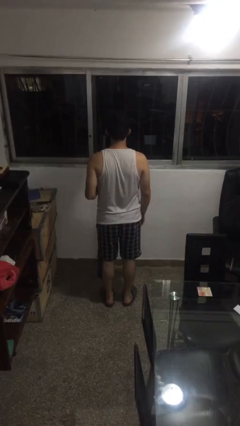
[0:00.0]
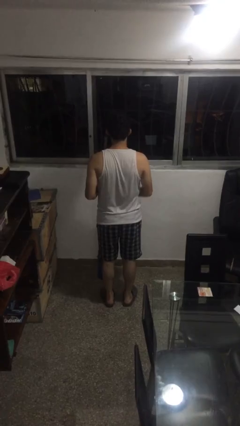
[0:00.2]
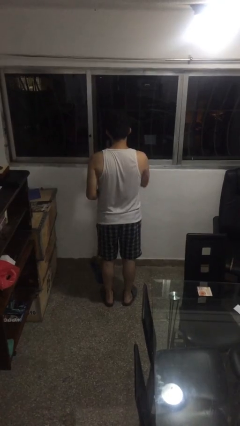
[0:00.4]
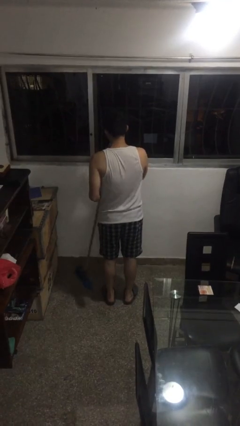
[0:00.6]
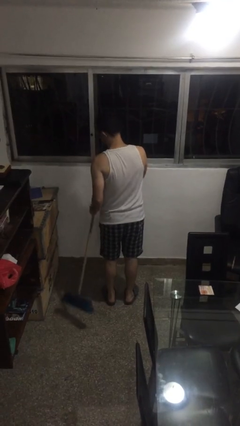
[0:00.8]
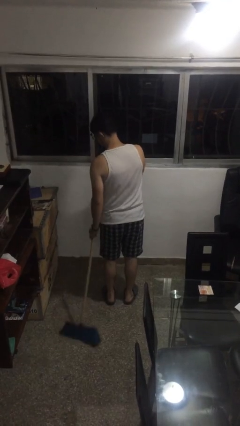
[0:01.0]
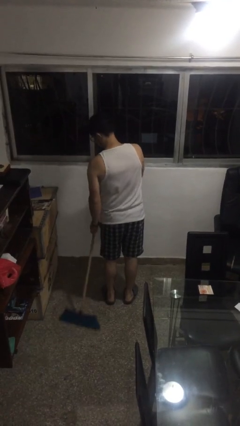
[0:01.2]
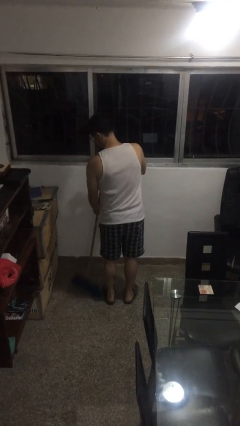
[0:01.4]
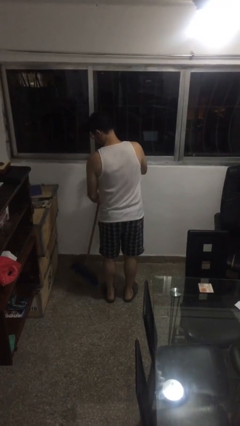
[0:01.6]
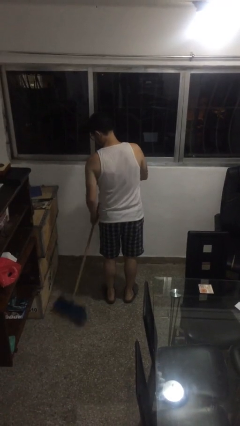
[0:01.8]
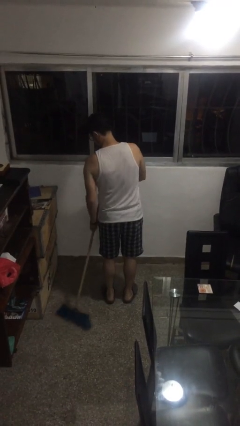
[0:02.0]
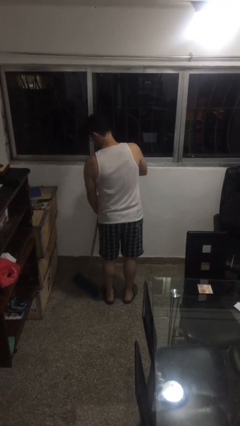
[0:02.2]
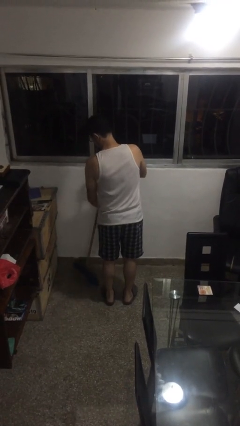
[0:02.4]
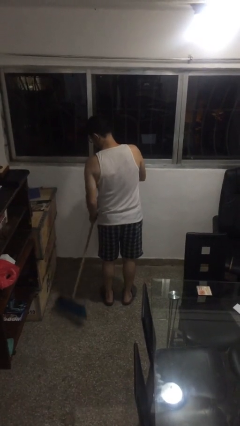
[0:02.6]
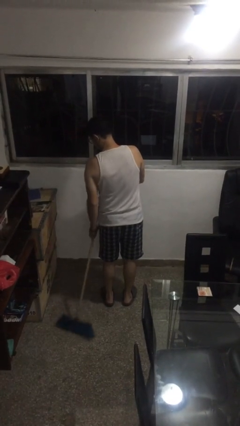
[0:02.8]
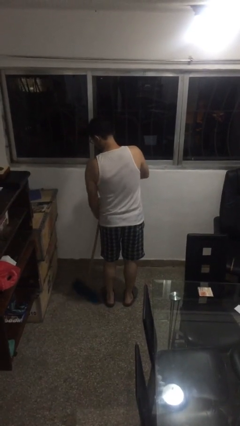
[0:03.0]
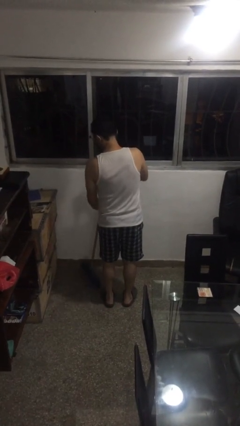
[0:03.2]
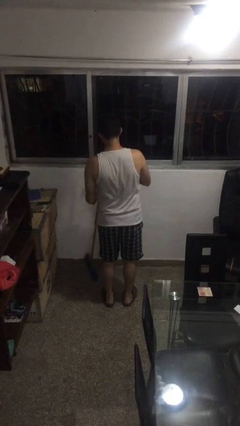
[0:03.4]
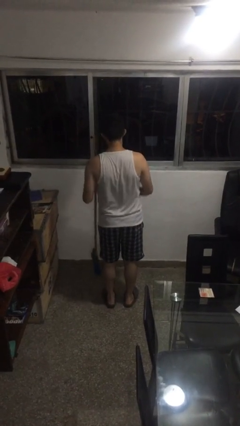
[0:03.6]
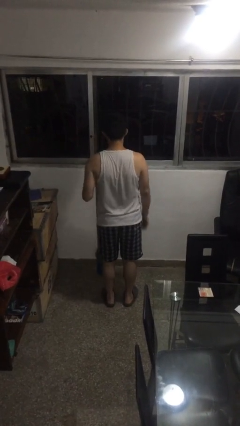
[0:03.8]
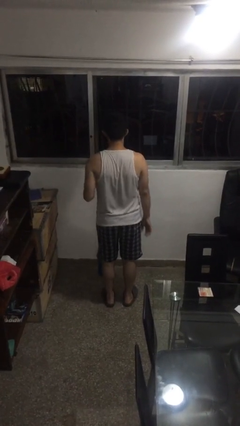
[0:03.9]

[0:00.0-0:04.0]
person sweeps floor

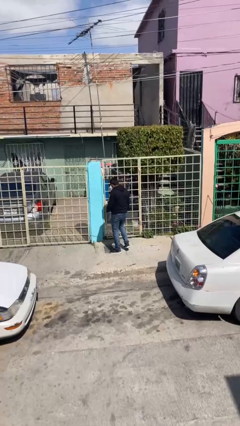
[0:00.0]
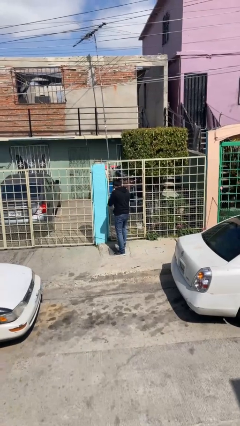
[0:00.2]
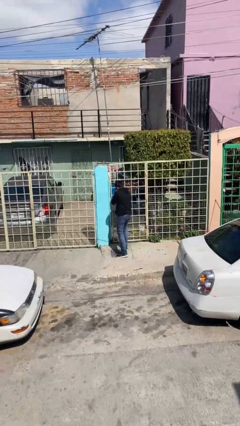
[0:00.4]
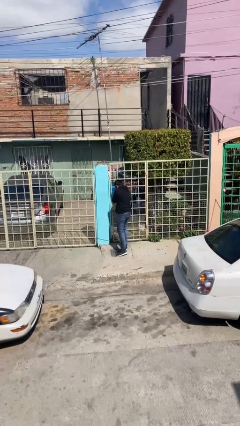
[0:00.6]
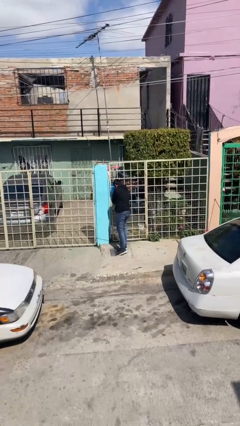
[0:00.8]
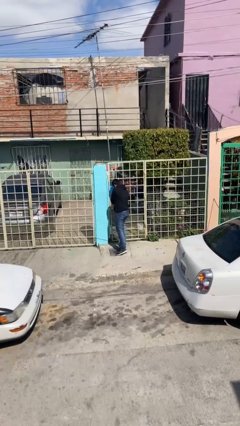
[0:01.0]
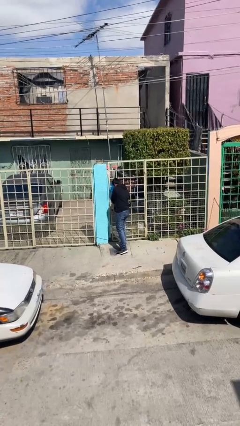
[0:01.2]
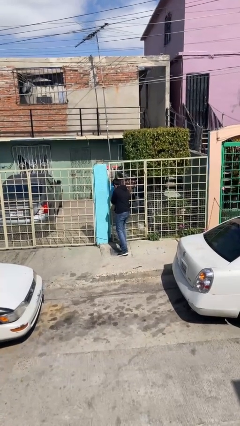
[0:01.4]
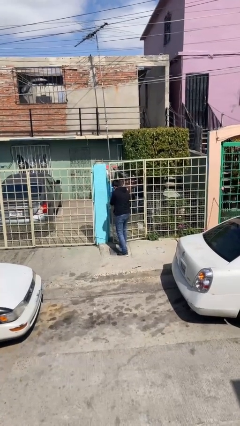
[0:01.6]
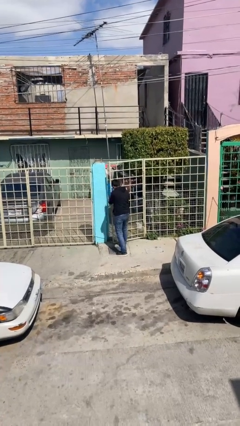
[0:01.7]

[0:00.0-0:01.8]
person opens facility door

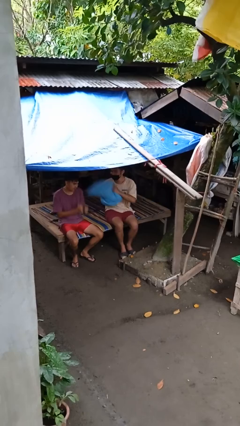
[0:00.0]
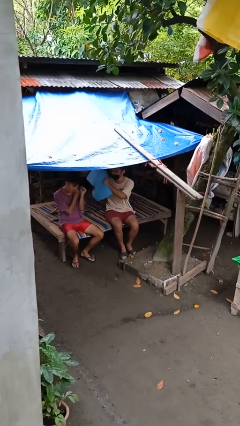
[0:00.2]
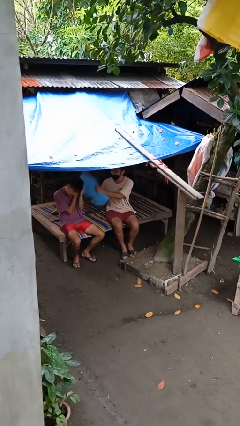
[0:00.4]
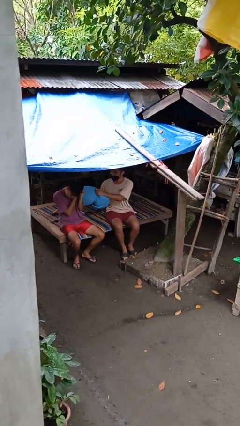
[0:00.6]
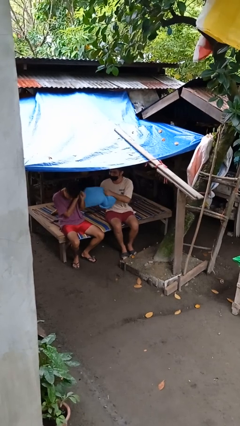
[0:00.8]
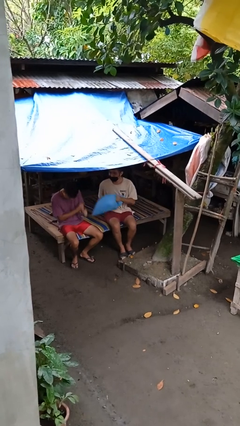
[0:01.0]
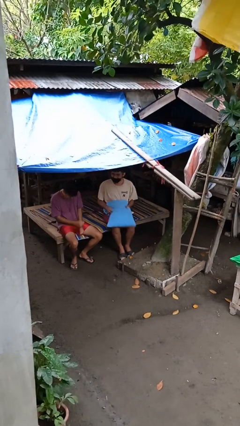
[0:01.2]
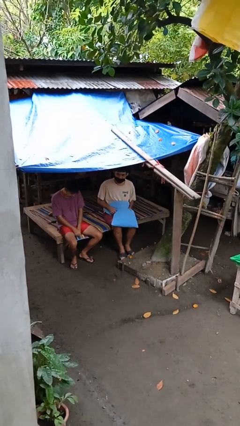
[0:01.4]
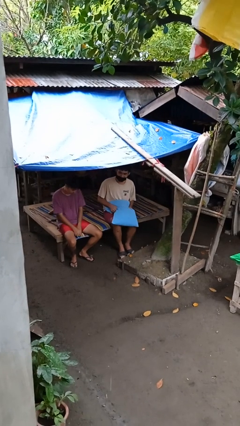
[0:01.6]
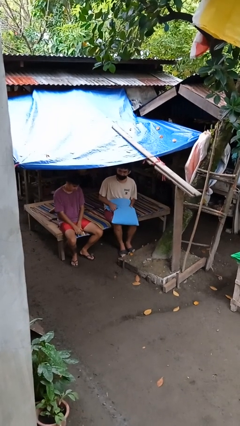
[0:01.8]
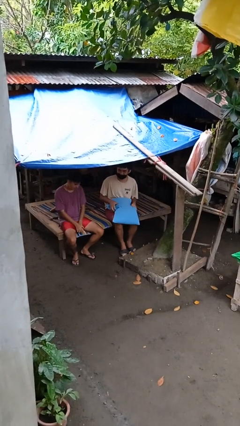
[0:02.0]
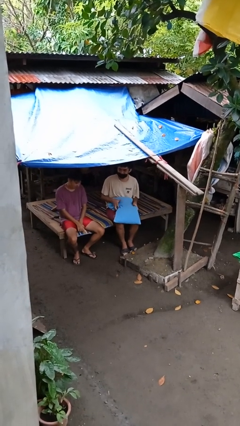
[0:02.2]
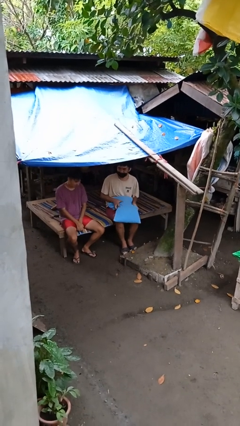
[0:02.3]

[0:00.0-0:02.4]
person hits person with pillow

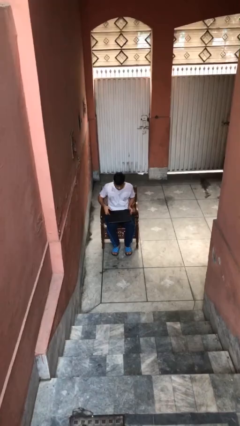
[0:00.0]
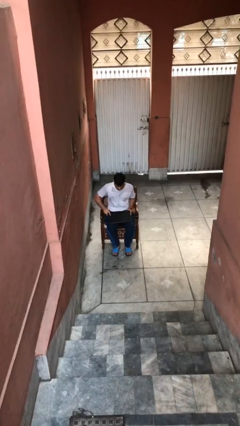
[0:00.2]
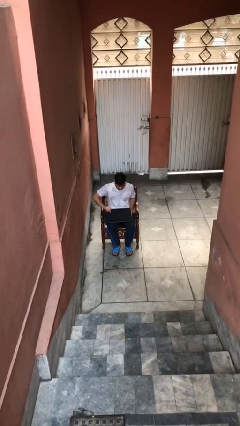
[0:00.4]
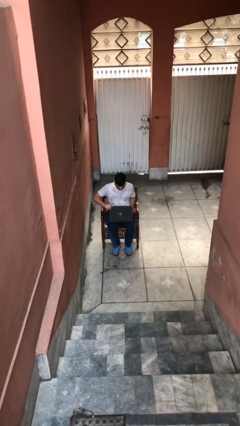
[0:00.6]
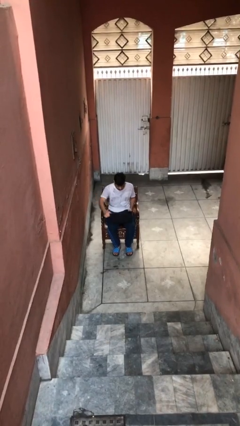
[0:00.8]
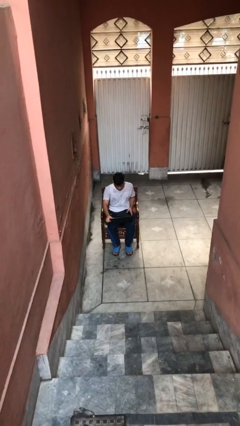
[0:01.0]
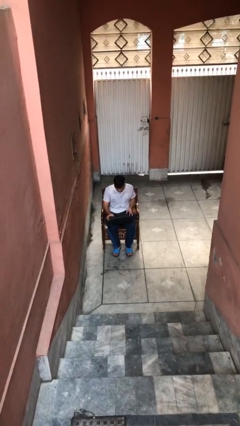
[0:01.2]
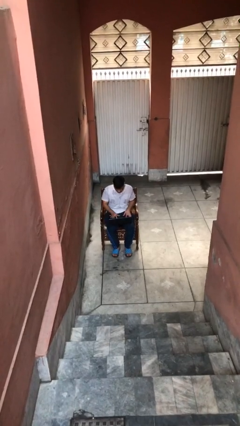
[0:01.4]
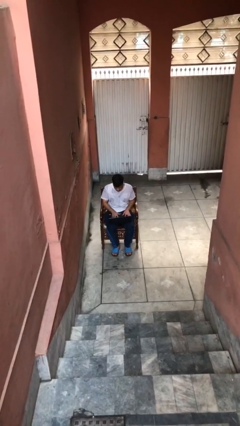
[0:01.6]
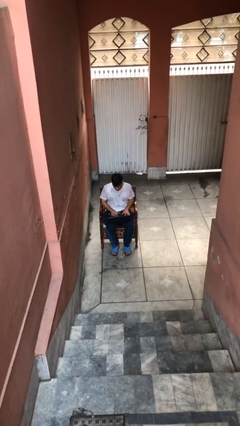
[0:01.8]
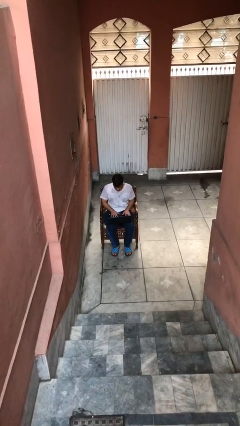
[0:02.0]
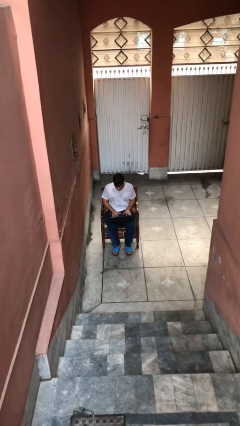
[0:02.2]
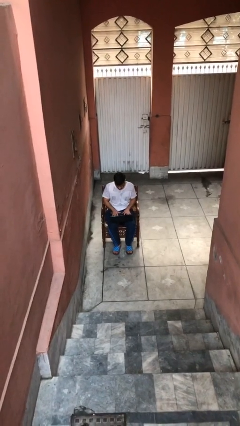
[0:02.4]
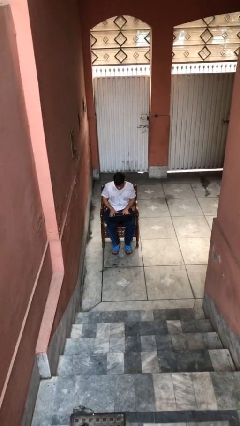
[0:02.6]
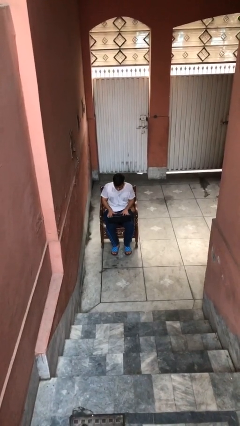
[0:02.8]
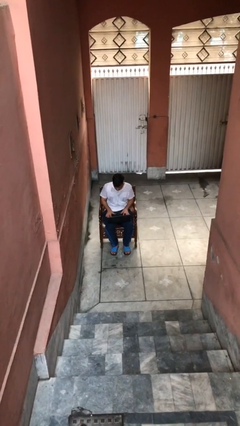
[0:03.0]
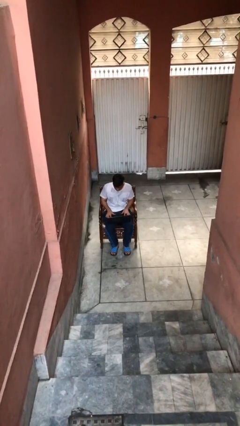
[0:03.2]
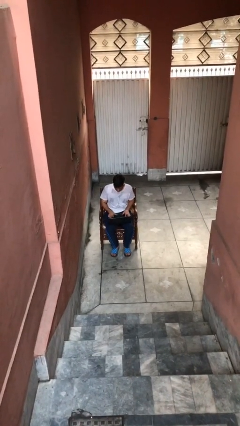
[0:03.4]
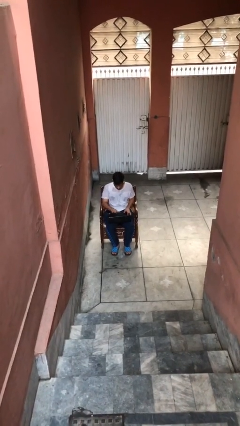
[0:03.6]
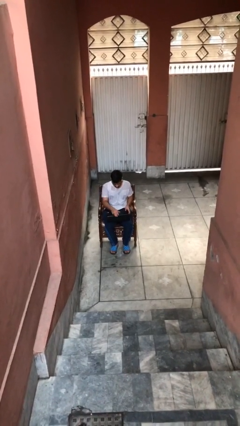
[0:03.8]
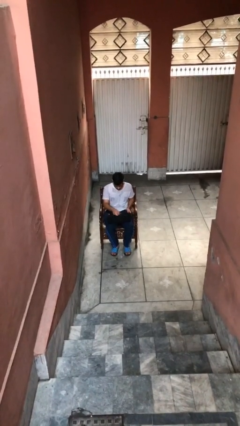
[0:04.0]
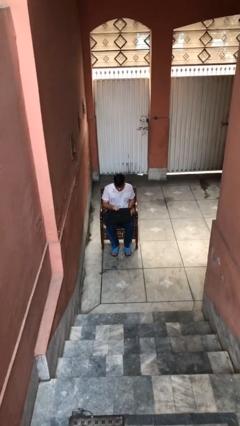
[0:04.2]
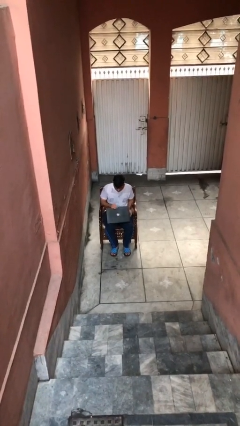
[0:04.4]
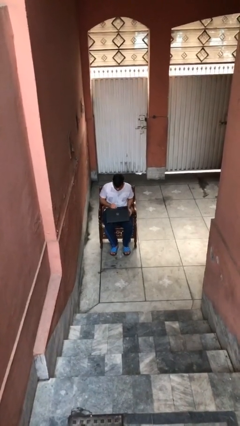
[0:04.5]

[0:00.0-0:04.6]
person interacts with laptop

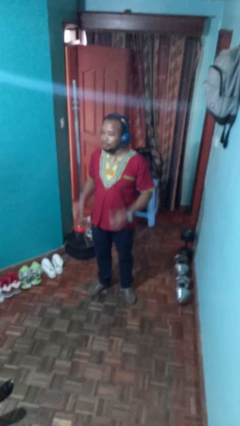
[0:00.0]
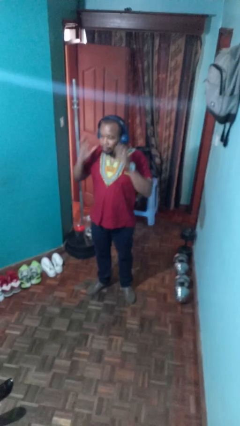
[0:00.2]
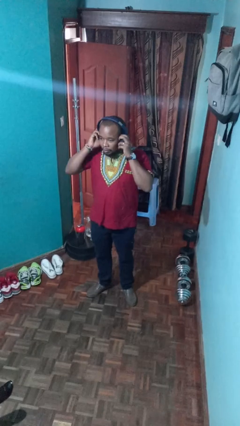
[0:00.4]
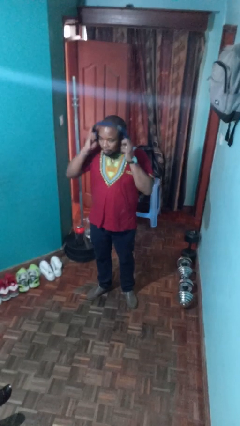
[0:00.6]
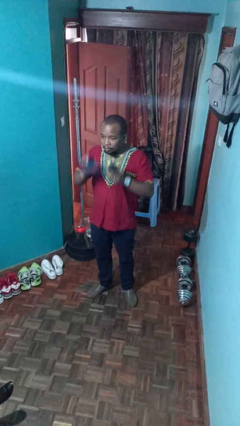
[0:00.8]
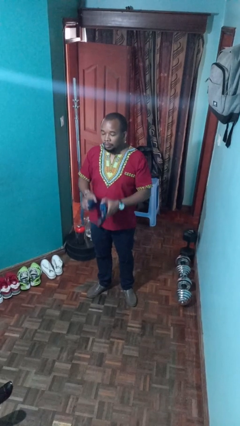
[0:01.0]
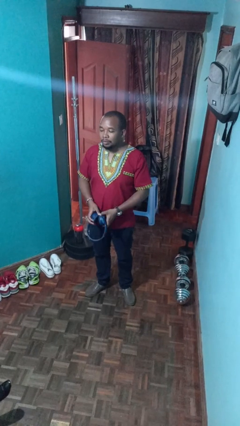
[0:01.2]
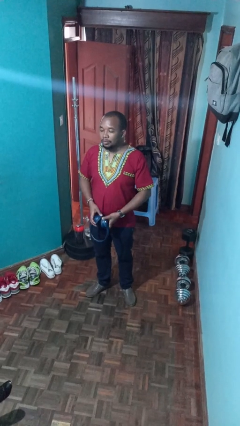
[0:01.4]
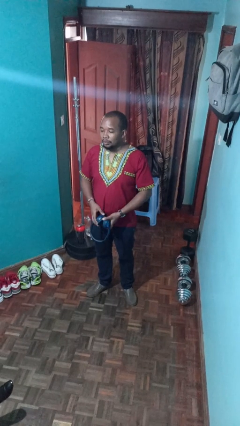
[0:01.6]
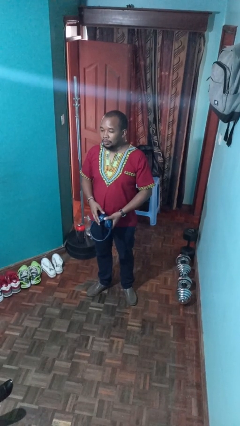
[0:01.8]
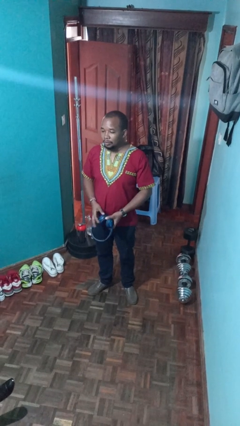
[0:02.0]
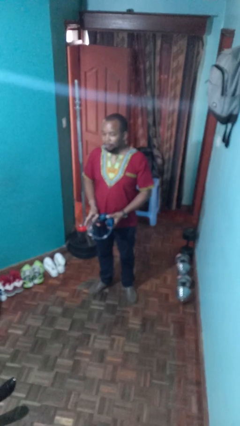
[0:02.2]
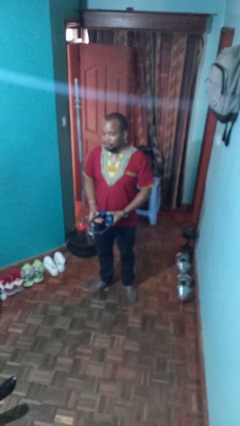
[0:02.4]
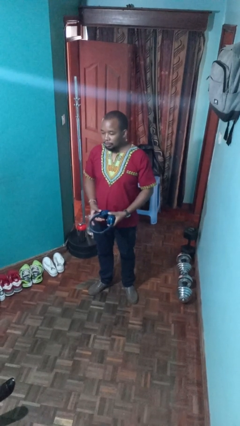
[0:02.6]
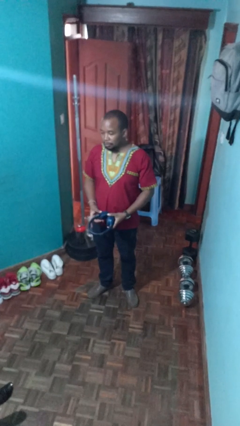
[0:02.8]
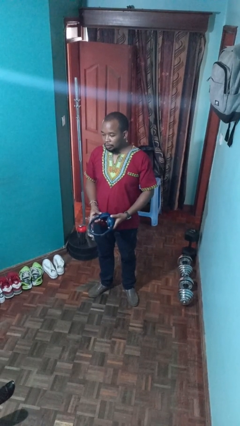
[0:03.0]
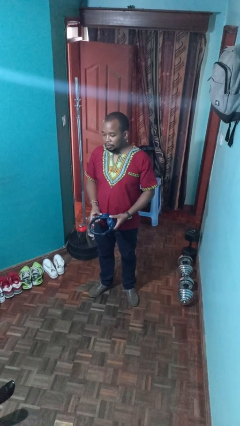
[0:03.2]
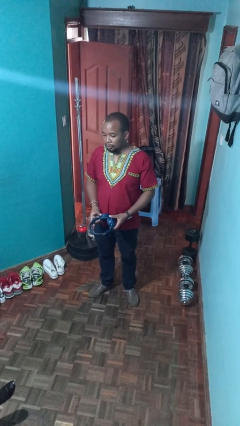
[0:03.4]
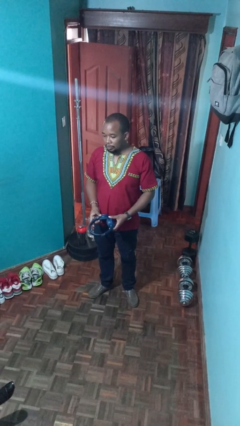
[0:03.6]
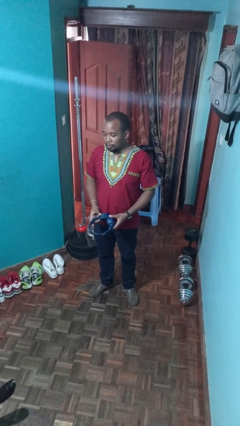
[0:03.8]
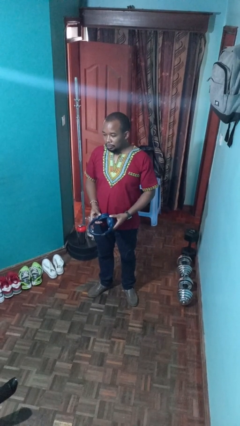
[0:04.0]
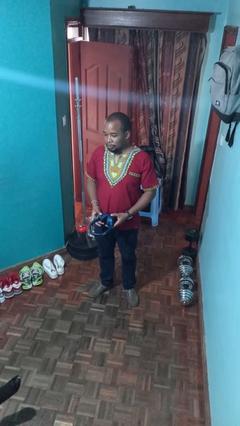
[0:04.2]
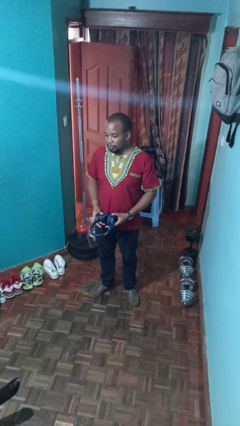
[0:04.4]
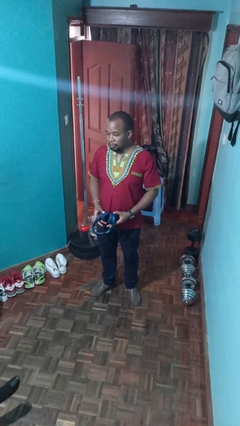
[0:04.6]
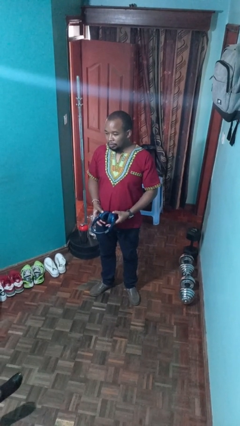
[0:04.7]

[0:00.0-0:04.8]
person takes off headphones
